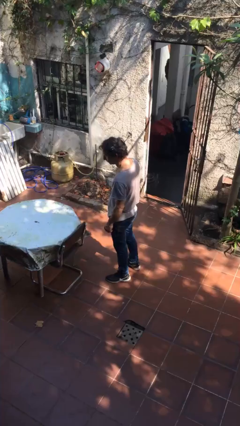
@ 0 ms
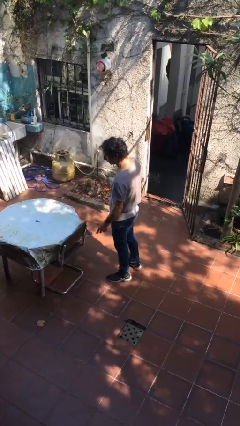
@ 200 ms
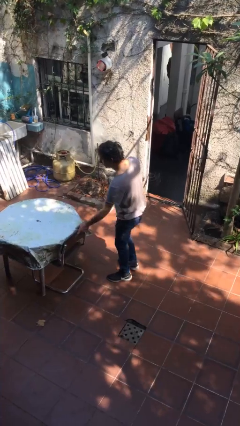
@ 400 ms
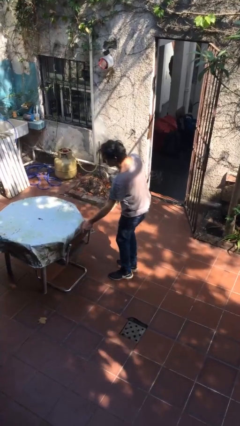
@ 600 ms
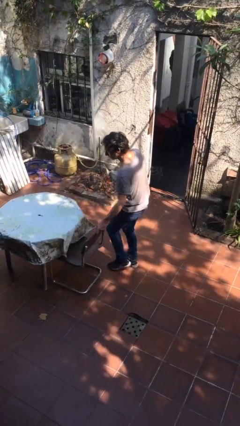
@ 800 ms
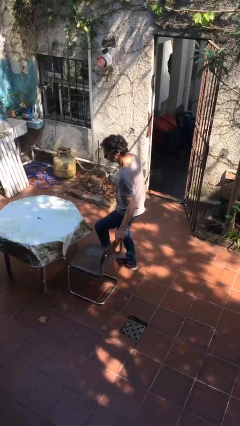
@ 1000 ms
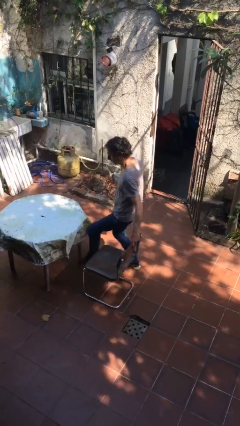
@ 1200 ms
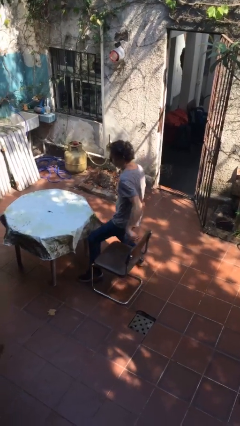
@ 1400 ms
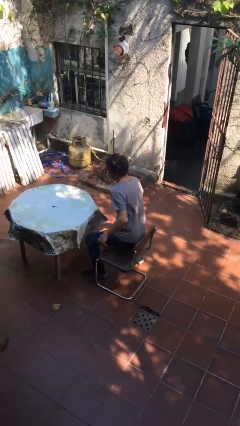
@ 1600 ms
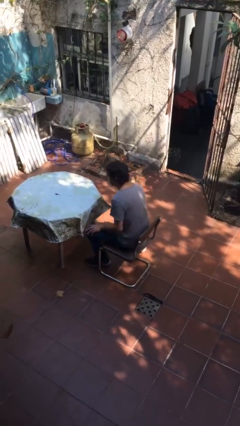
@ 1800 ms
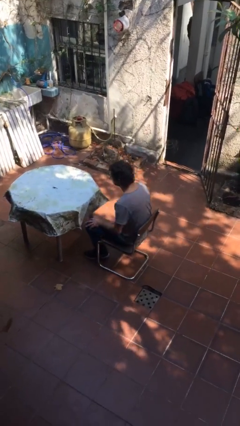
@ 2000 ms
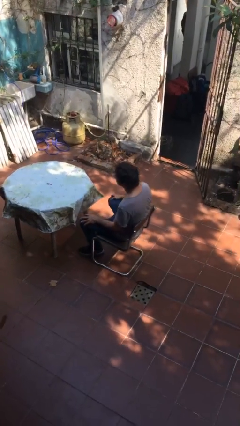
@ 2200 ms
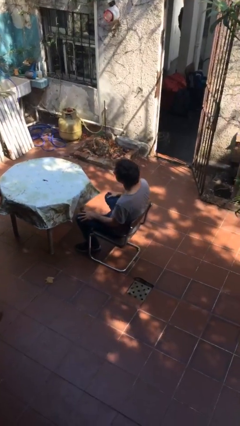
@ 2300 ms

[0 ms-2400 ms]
person sits down

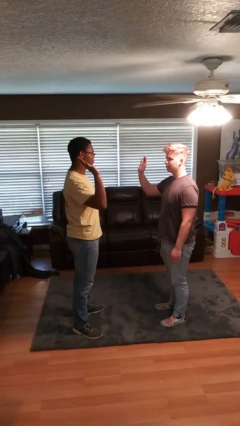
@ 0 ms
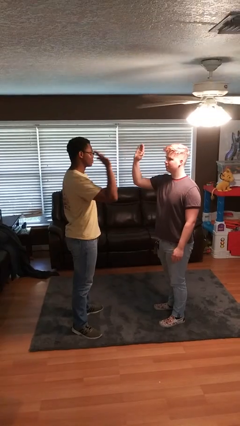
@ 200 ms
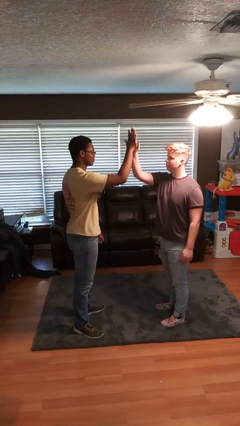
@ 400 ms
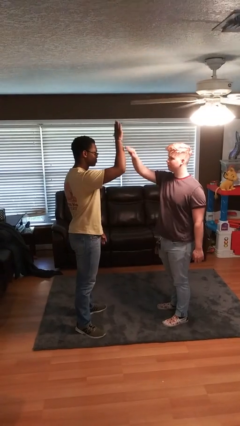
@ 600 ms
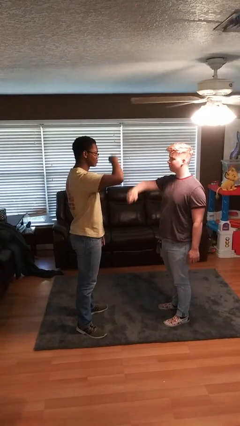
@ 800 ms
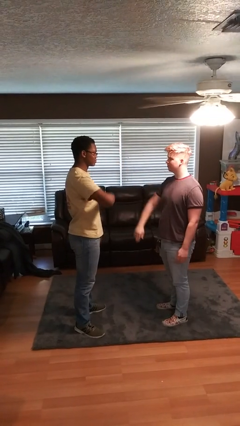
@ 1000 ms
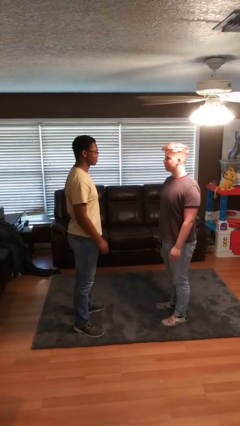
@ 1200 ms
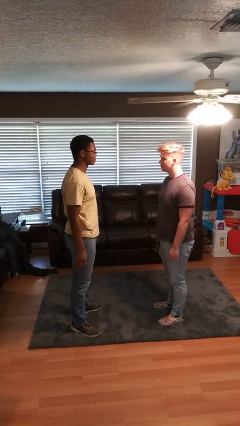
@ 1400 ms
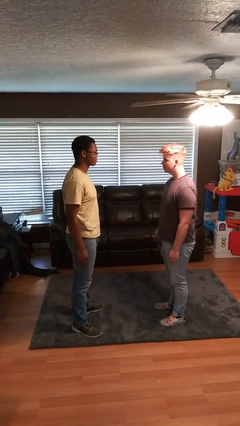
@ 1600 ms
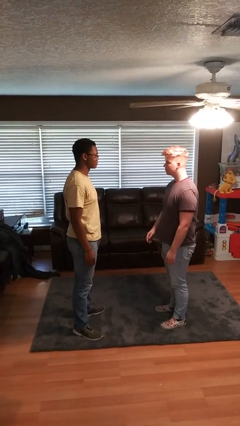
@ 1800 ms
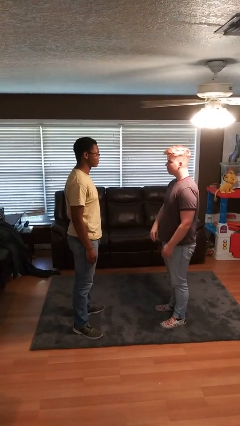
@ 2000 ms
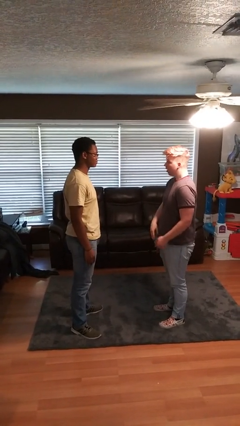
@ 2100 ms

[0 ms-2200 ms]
person highfives hand

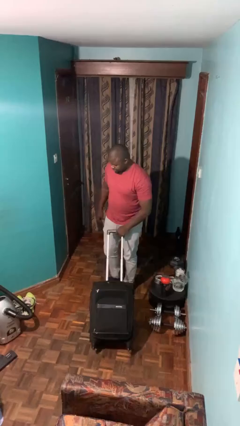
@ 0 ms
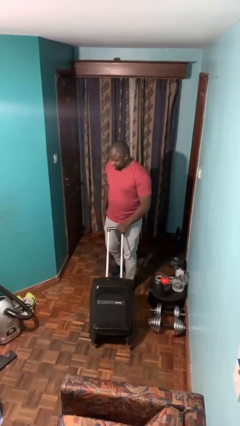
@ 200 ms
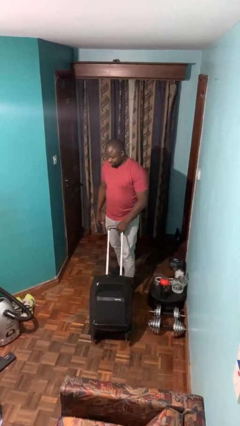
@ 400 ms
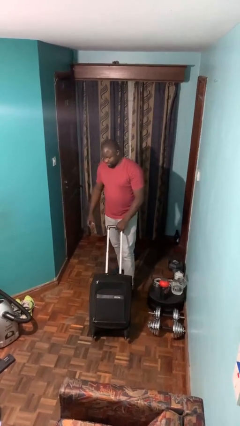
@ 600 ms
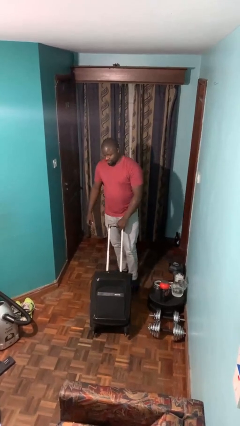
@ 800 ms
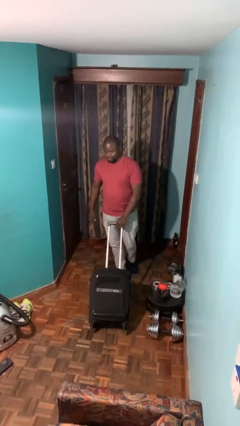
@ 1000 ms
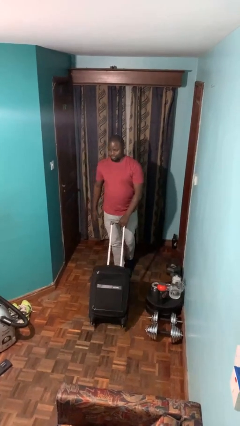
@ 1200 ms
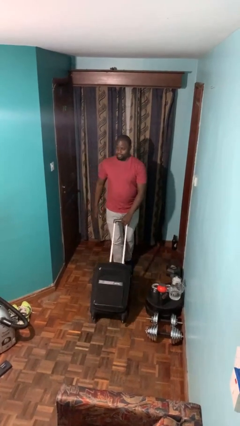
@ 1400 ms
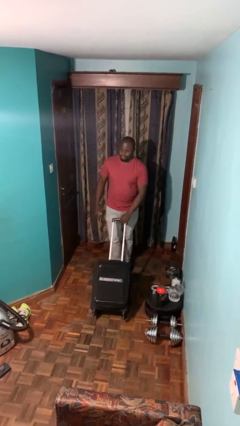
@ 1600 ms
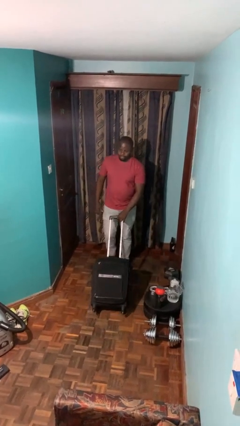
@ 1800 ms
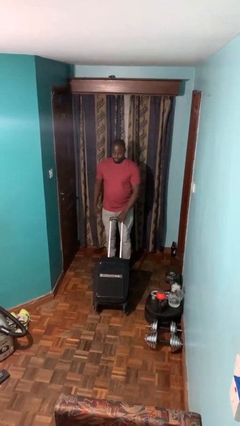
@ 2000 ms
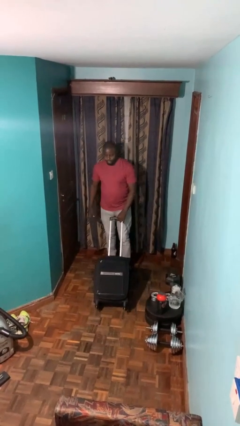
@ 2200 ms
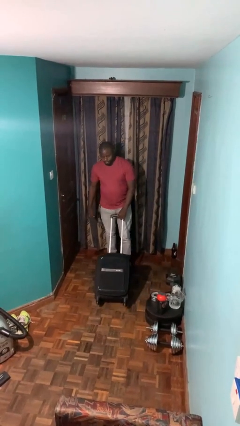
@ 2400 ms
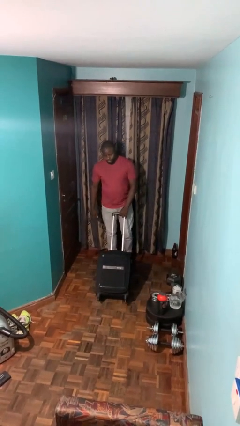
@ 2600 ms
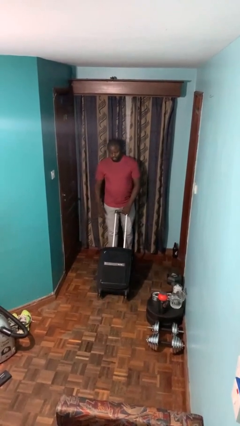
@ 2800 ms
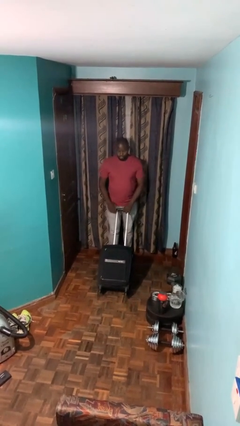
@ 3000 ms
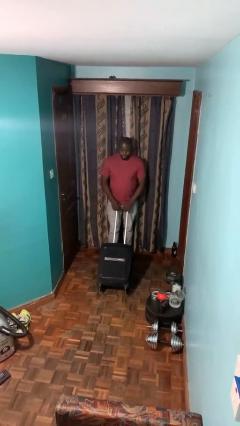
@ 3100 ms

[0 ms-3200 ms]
person pulls wheeled cart

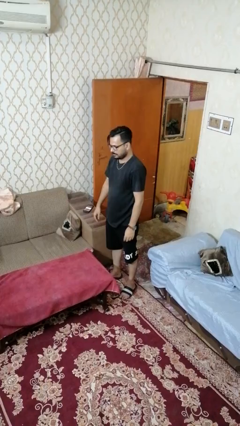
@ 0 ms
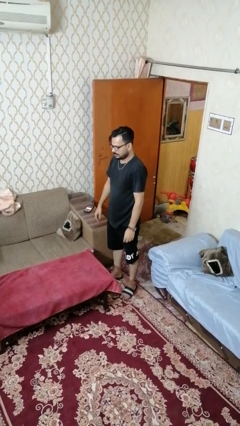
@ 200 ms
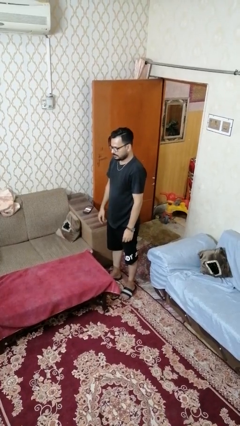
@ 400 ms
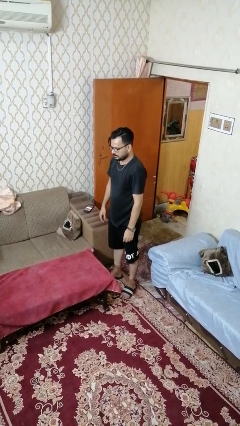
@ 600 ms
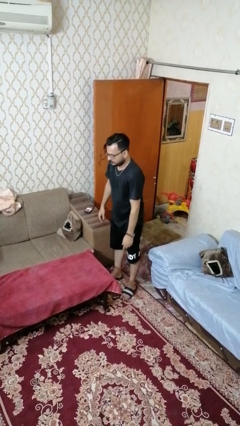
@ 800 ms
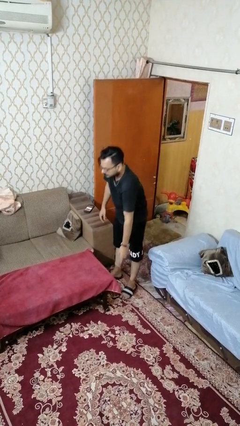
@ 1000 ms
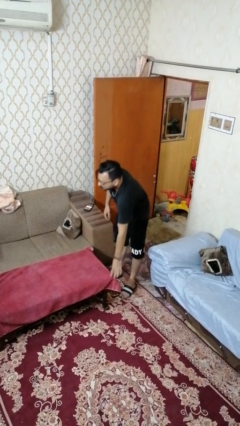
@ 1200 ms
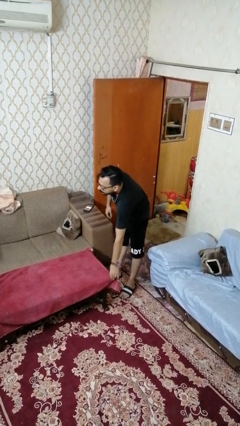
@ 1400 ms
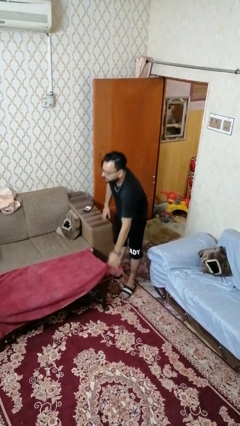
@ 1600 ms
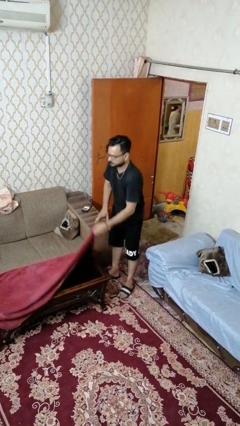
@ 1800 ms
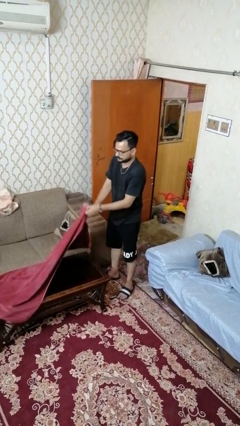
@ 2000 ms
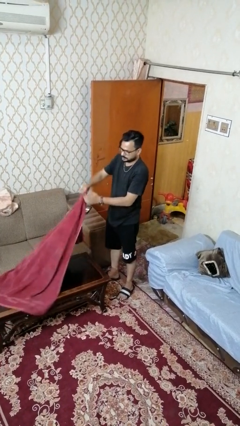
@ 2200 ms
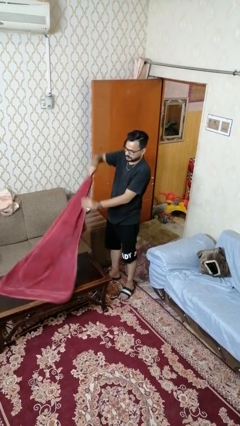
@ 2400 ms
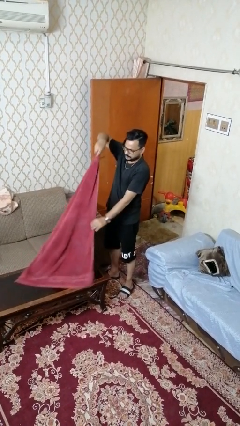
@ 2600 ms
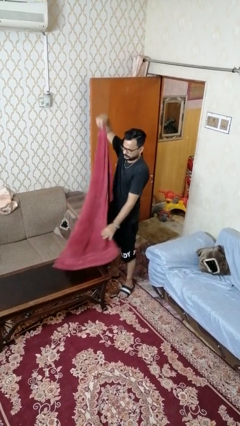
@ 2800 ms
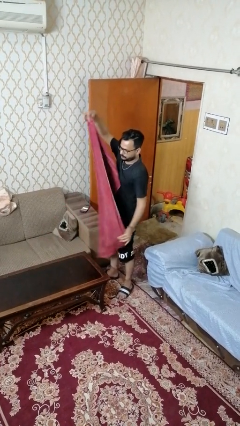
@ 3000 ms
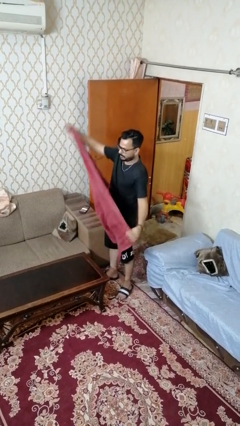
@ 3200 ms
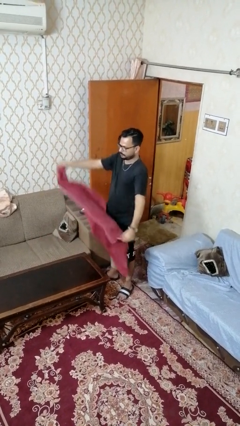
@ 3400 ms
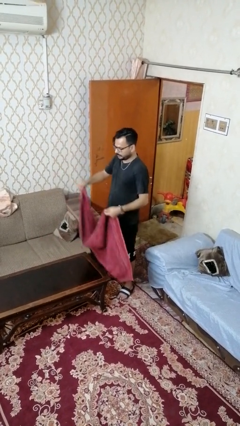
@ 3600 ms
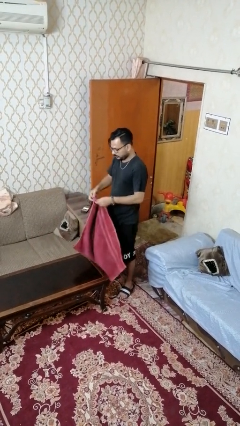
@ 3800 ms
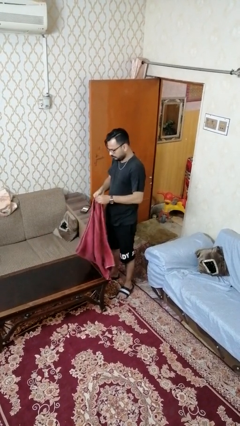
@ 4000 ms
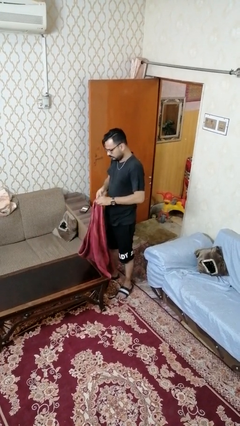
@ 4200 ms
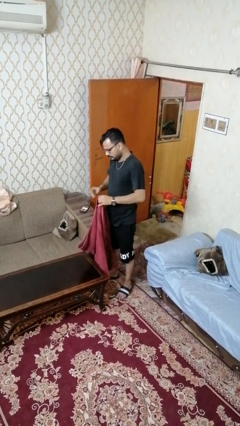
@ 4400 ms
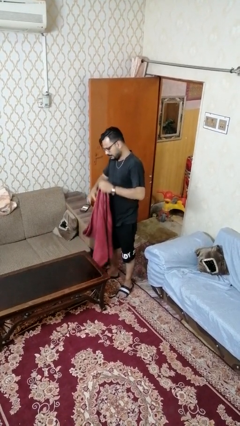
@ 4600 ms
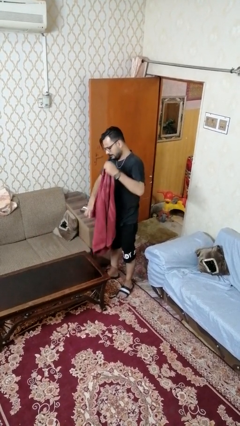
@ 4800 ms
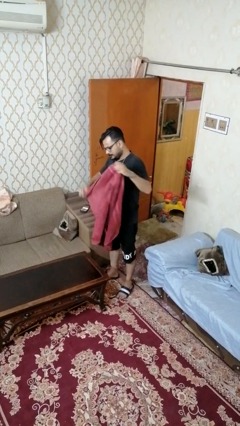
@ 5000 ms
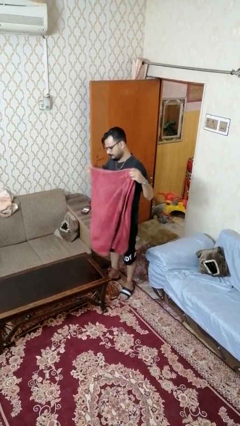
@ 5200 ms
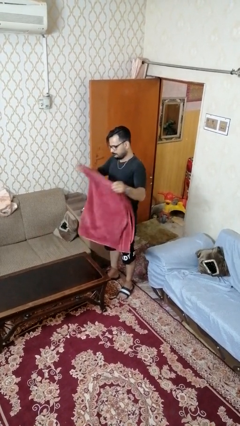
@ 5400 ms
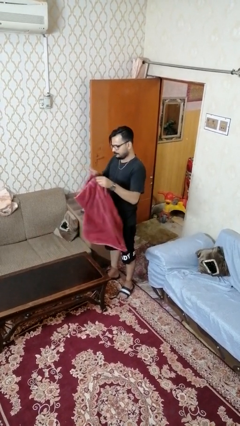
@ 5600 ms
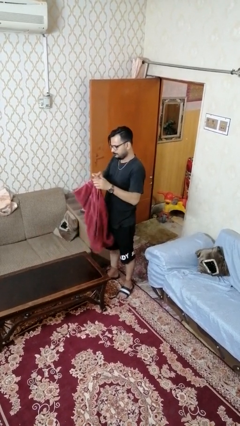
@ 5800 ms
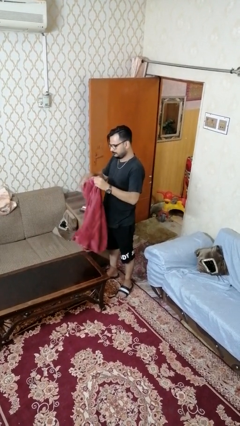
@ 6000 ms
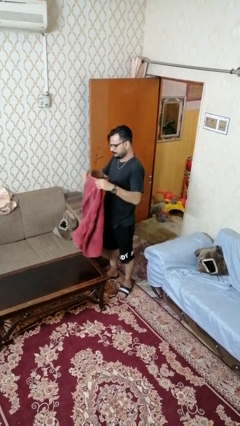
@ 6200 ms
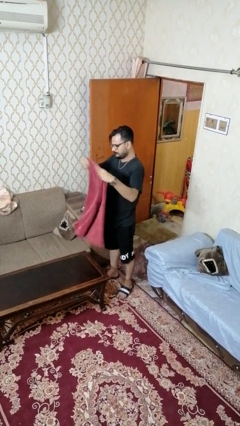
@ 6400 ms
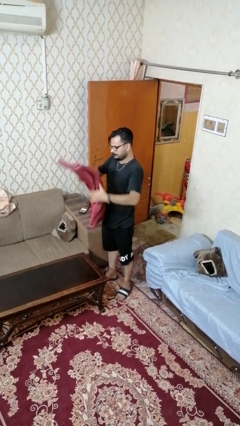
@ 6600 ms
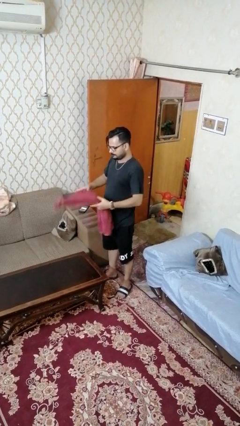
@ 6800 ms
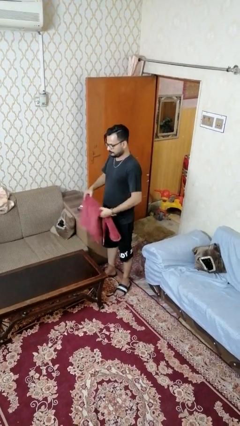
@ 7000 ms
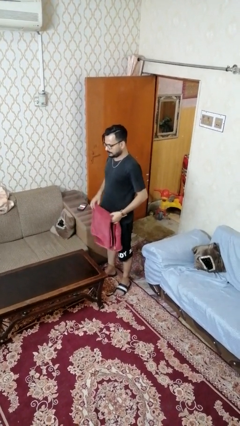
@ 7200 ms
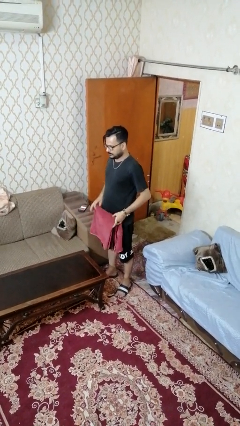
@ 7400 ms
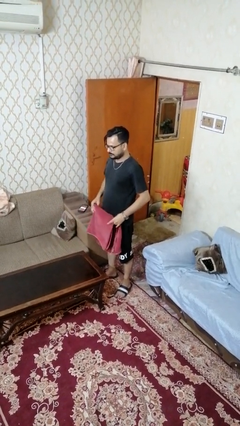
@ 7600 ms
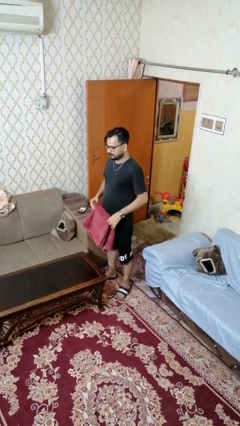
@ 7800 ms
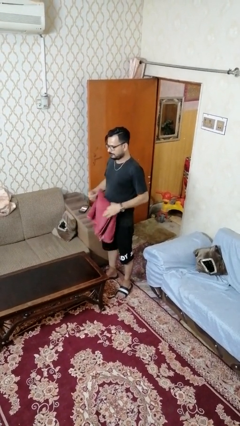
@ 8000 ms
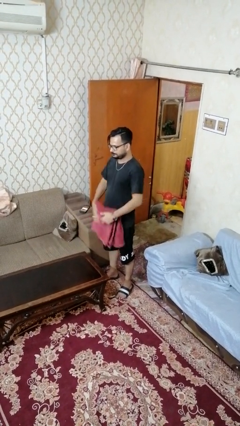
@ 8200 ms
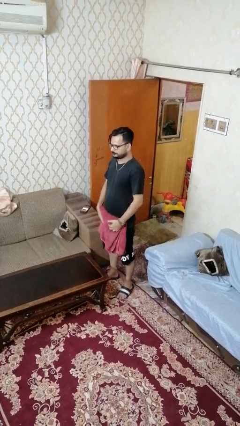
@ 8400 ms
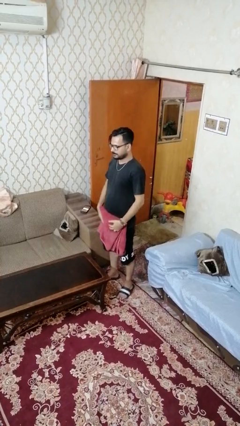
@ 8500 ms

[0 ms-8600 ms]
person folds tablecloth

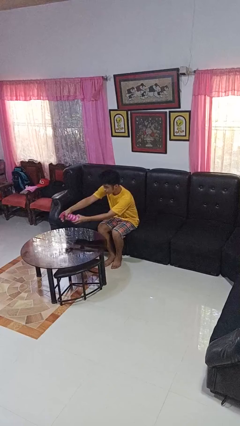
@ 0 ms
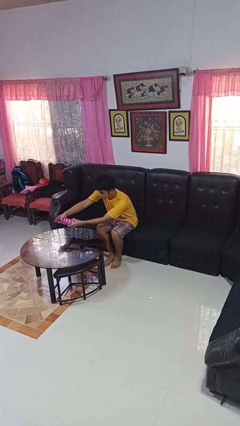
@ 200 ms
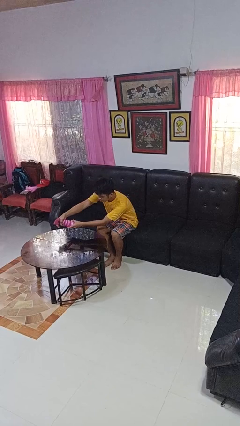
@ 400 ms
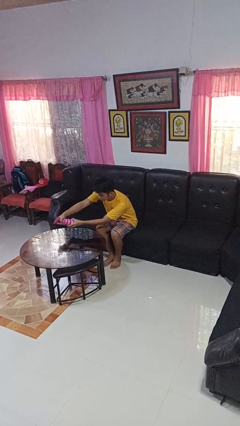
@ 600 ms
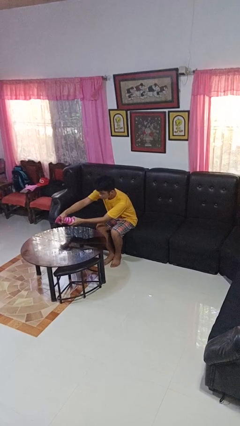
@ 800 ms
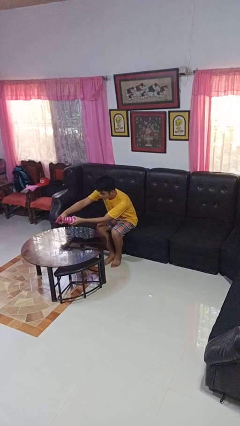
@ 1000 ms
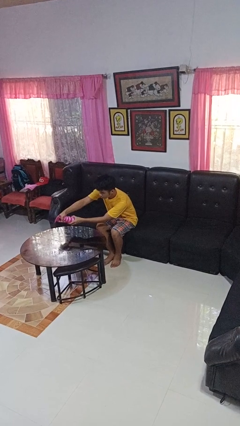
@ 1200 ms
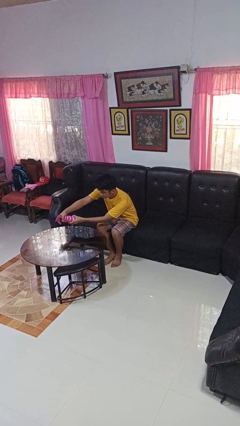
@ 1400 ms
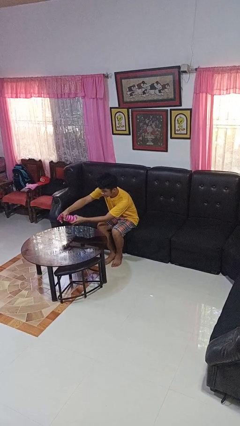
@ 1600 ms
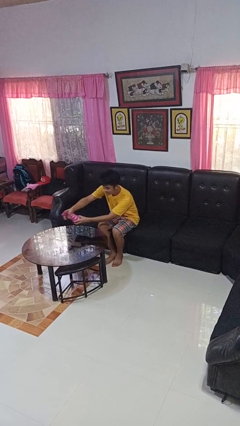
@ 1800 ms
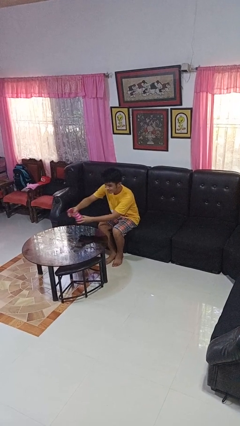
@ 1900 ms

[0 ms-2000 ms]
person sprays from bottle
